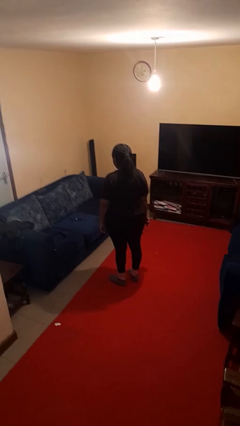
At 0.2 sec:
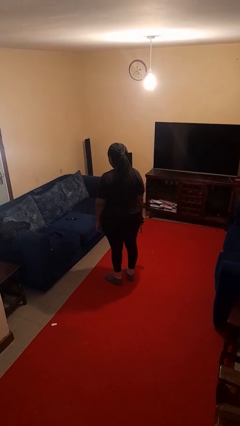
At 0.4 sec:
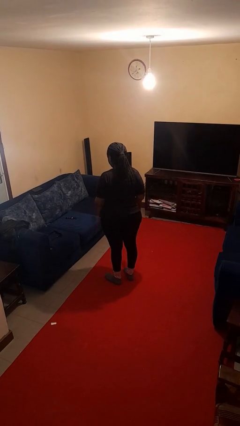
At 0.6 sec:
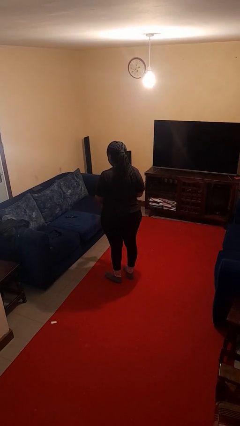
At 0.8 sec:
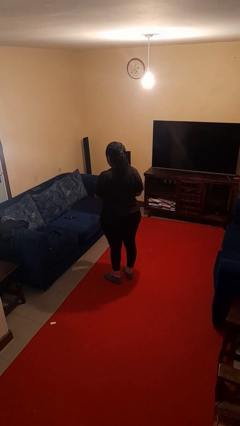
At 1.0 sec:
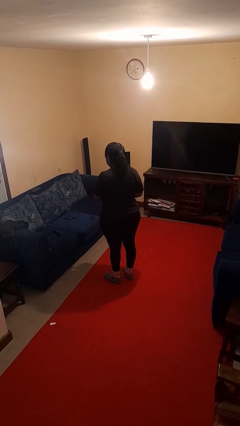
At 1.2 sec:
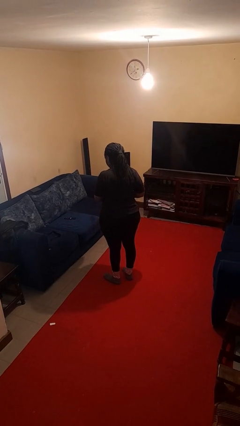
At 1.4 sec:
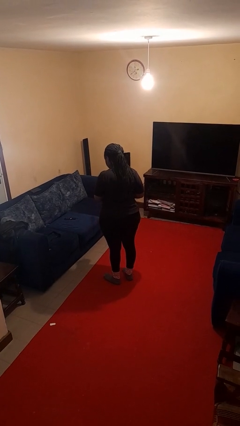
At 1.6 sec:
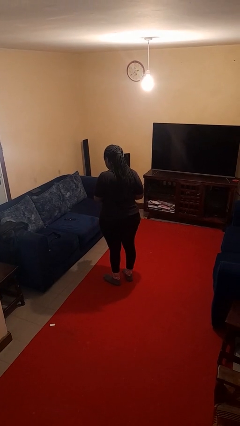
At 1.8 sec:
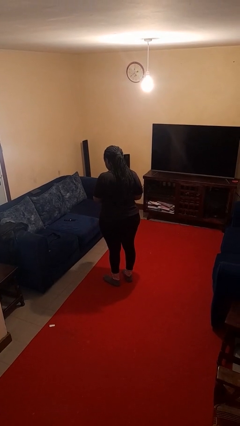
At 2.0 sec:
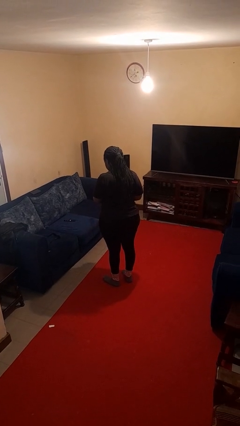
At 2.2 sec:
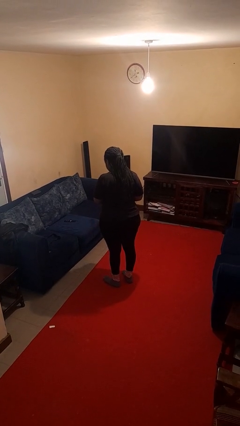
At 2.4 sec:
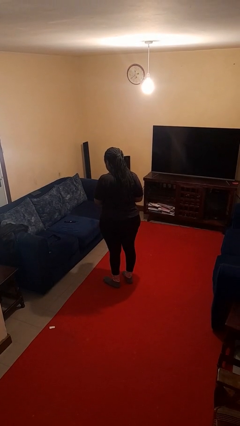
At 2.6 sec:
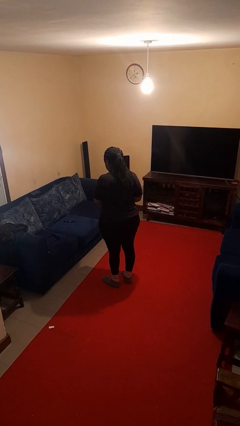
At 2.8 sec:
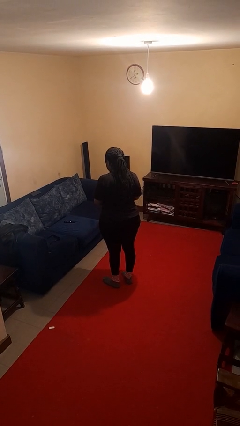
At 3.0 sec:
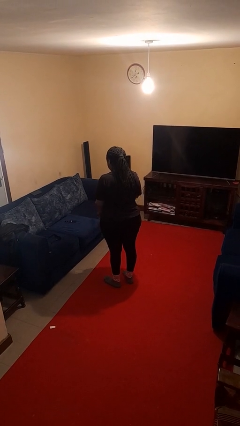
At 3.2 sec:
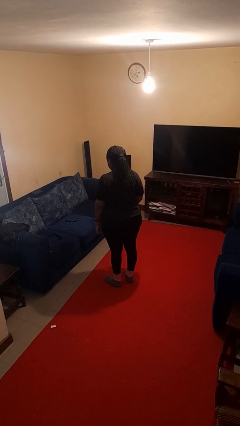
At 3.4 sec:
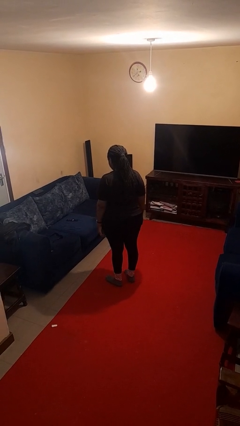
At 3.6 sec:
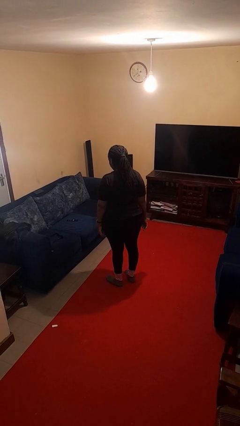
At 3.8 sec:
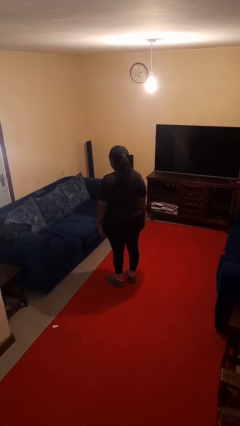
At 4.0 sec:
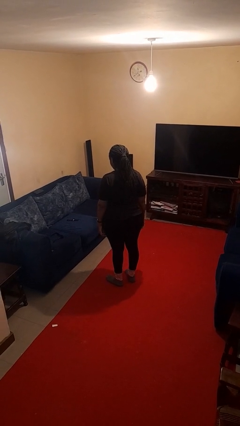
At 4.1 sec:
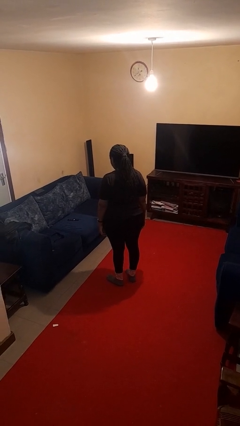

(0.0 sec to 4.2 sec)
person puts on wristwatch

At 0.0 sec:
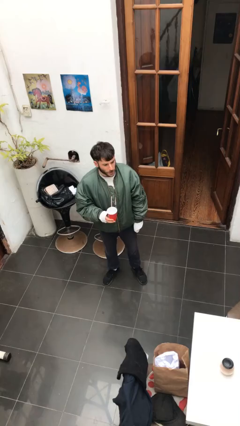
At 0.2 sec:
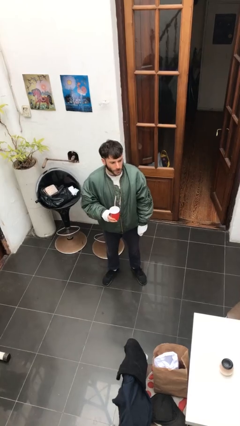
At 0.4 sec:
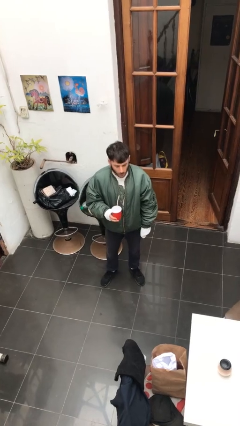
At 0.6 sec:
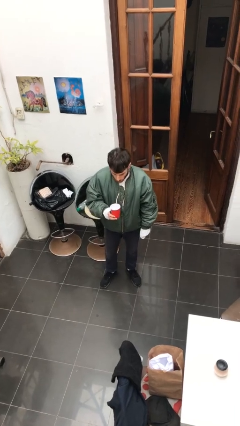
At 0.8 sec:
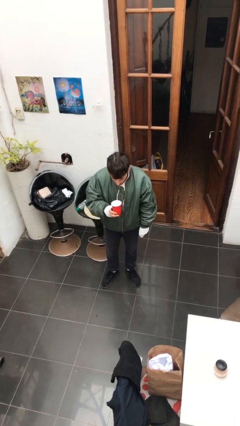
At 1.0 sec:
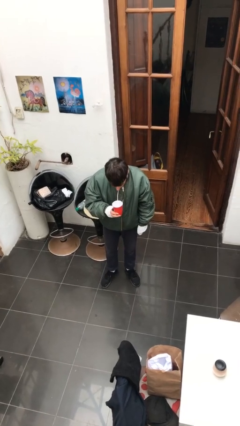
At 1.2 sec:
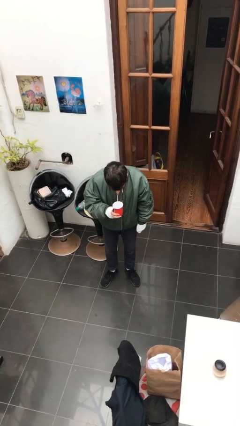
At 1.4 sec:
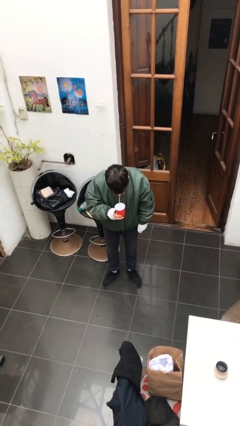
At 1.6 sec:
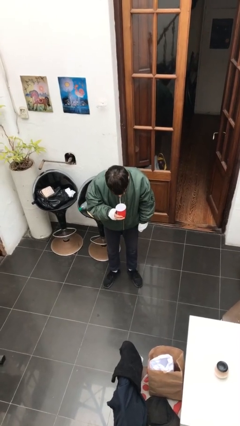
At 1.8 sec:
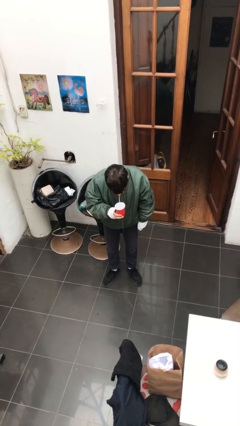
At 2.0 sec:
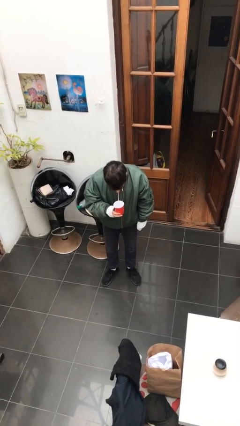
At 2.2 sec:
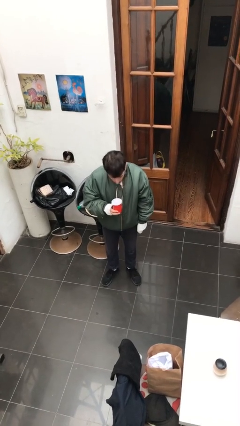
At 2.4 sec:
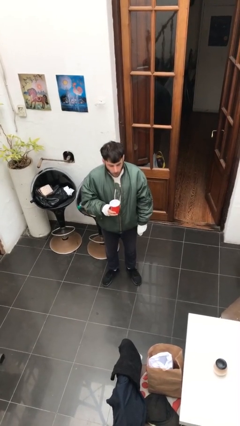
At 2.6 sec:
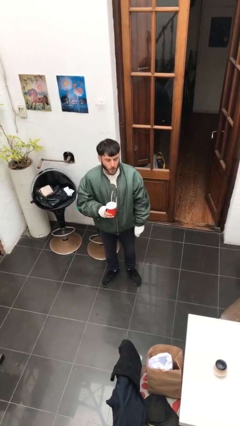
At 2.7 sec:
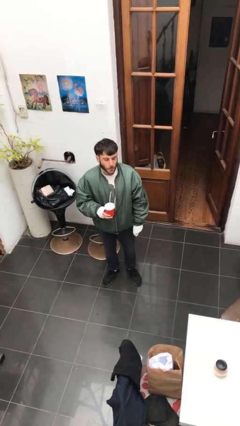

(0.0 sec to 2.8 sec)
person drinks from straw

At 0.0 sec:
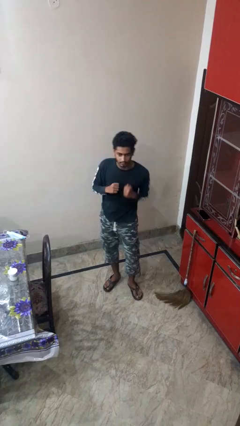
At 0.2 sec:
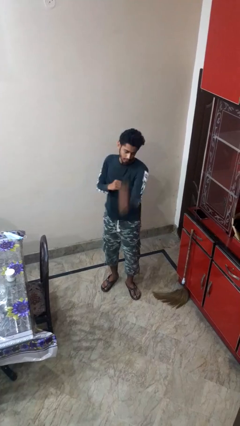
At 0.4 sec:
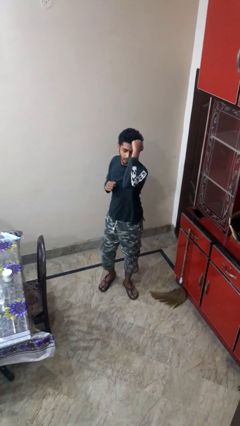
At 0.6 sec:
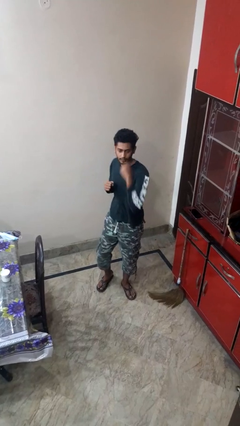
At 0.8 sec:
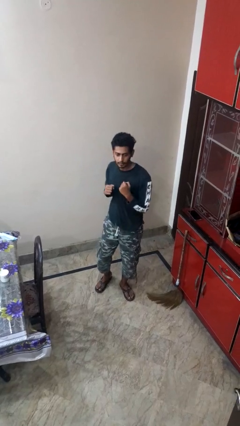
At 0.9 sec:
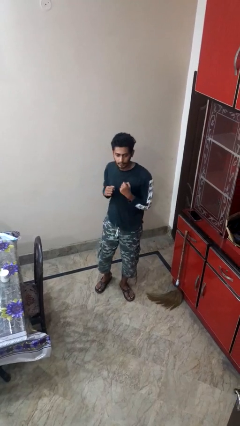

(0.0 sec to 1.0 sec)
person punches

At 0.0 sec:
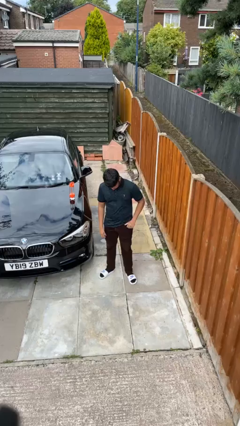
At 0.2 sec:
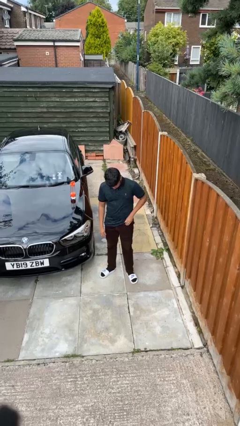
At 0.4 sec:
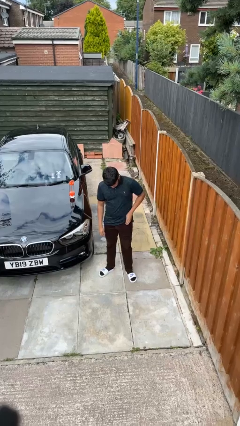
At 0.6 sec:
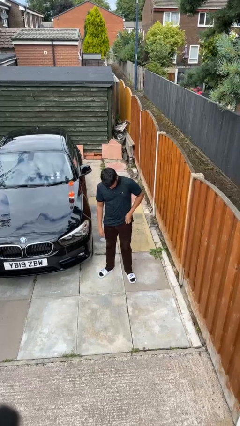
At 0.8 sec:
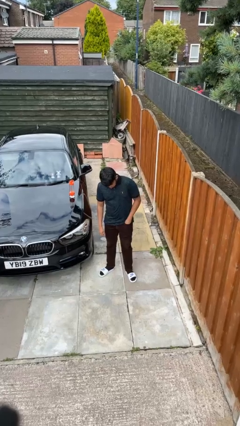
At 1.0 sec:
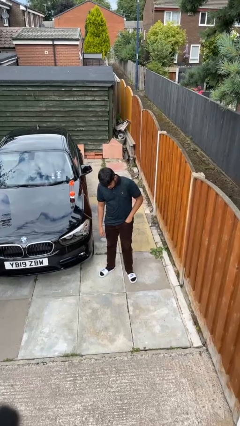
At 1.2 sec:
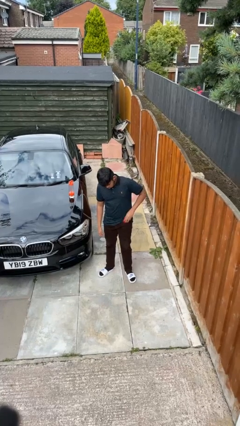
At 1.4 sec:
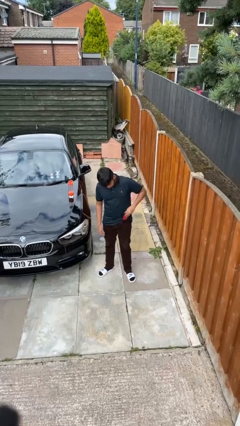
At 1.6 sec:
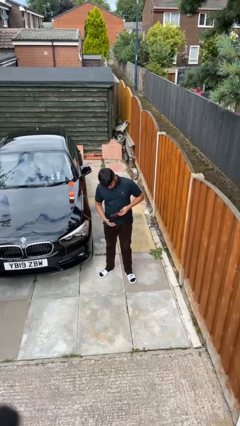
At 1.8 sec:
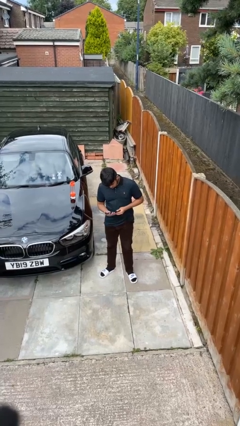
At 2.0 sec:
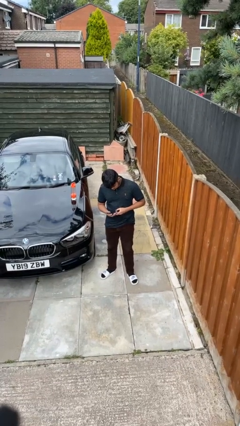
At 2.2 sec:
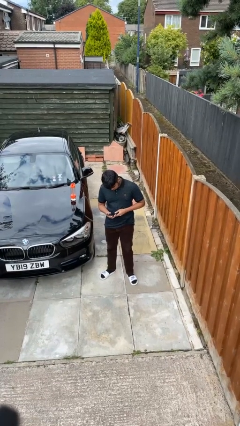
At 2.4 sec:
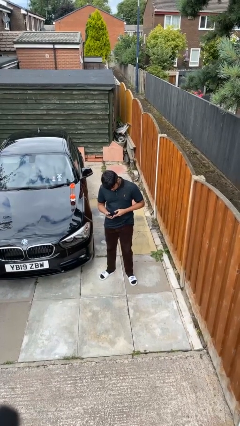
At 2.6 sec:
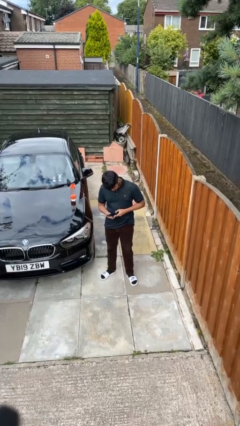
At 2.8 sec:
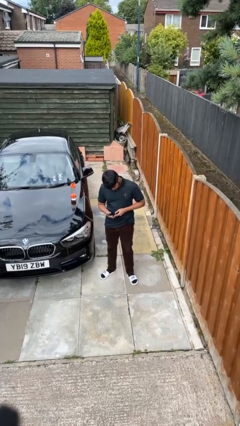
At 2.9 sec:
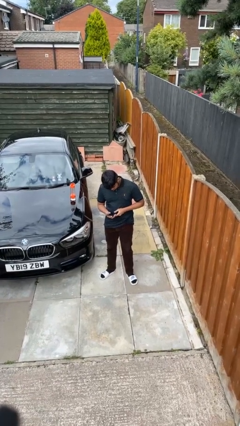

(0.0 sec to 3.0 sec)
person takes phone from pocket

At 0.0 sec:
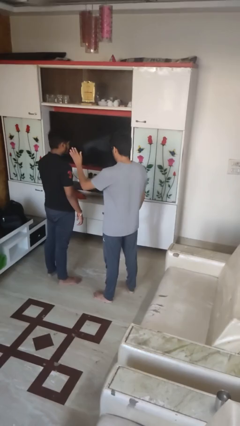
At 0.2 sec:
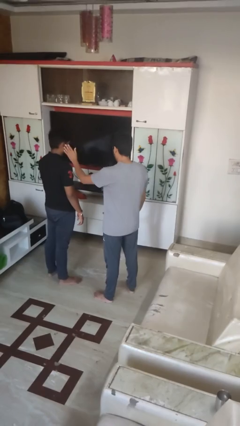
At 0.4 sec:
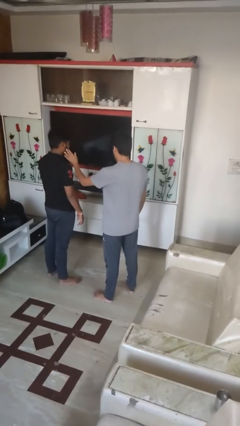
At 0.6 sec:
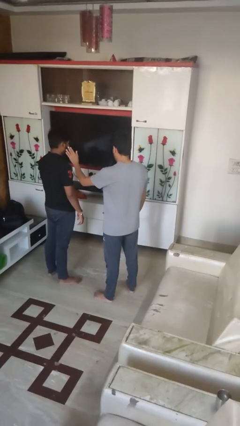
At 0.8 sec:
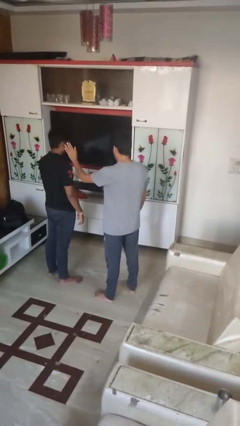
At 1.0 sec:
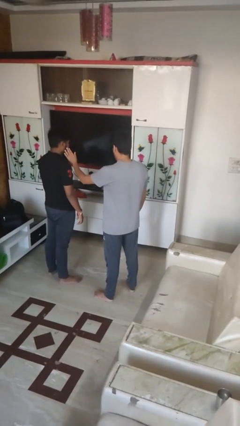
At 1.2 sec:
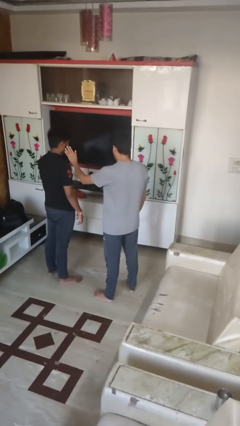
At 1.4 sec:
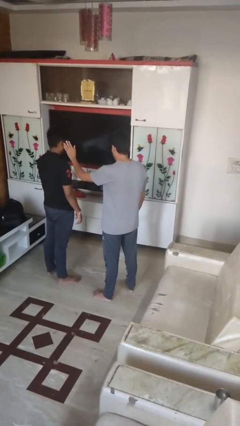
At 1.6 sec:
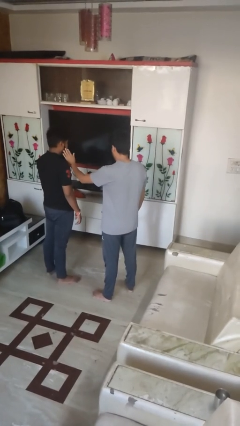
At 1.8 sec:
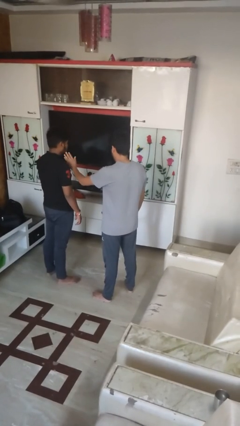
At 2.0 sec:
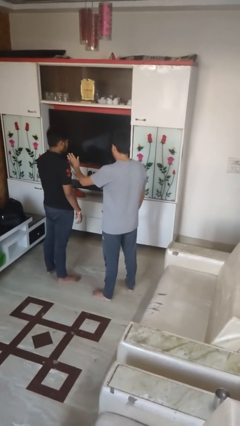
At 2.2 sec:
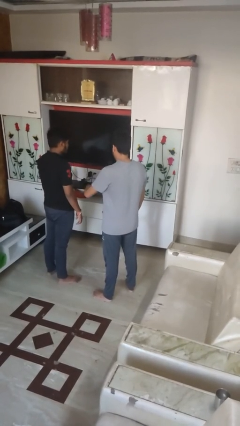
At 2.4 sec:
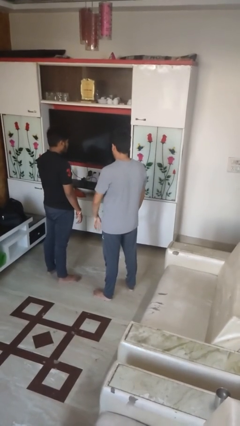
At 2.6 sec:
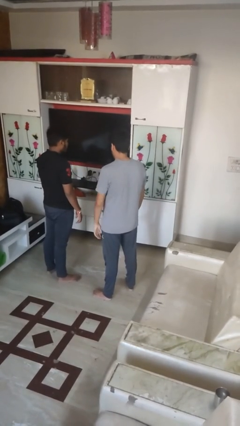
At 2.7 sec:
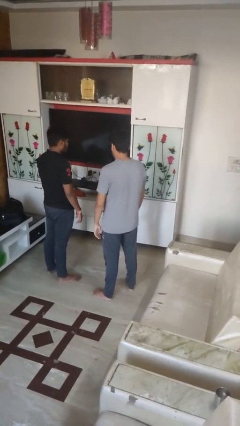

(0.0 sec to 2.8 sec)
person touches face of person

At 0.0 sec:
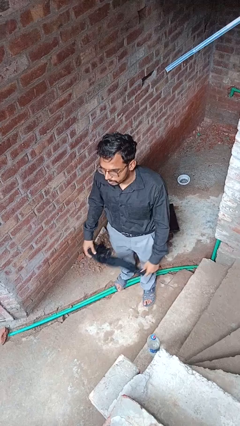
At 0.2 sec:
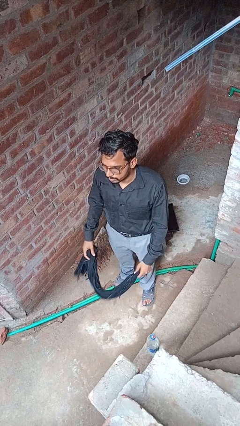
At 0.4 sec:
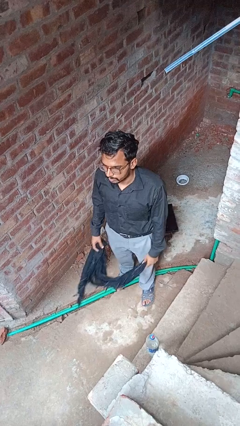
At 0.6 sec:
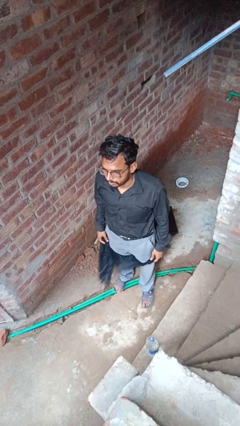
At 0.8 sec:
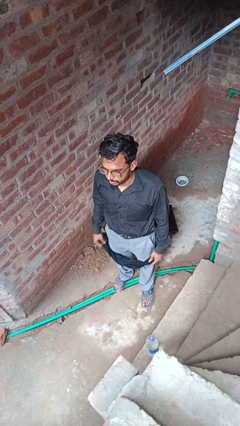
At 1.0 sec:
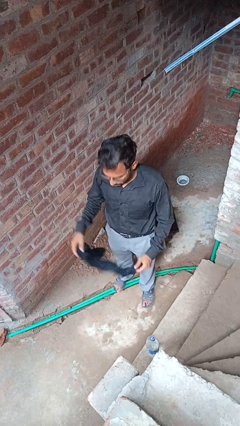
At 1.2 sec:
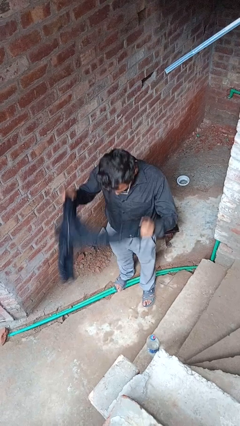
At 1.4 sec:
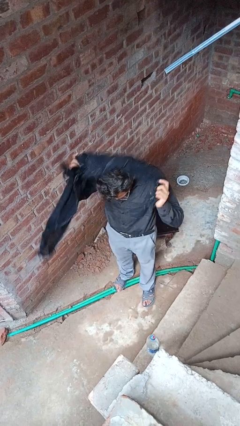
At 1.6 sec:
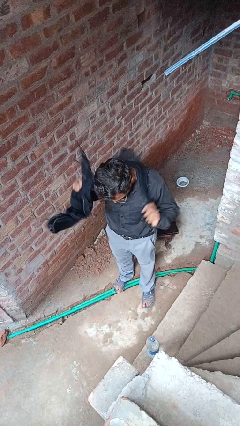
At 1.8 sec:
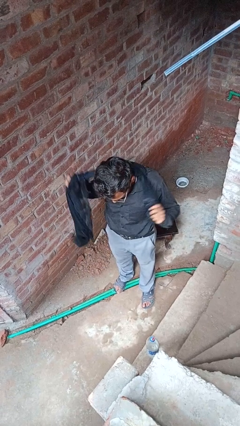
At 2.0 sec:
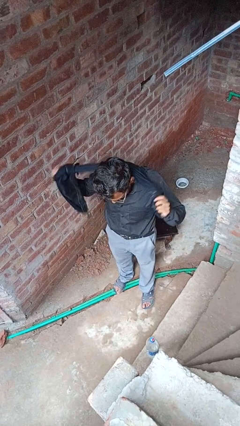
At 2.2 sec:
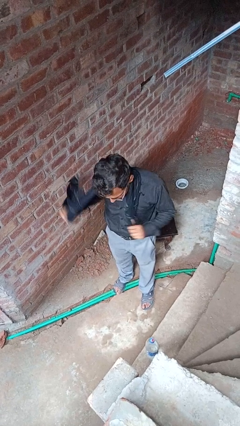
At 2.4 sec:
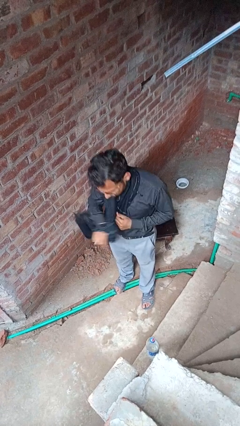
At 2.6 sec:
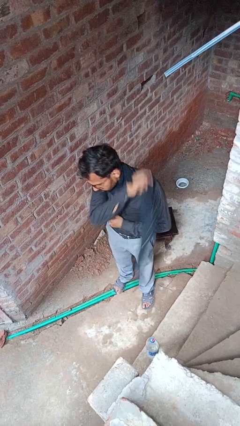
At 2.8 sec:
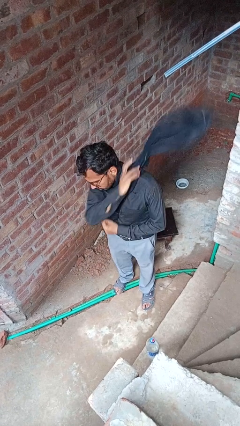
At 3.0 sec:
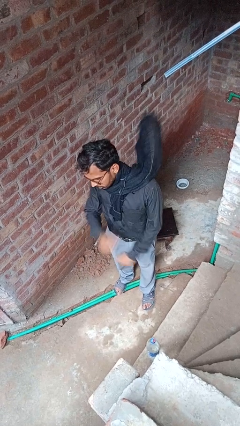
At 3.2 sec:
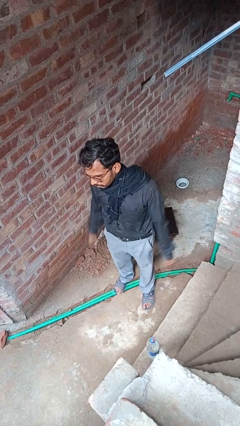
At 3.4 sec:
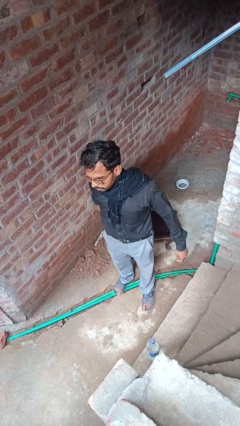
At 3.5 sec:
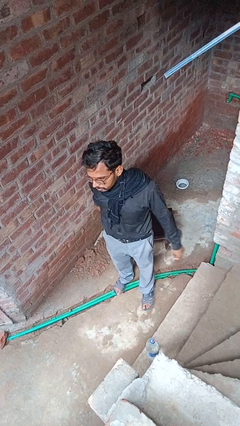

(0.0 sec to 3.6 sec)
person puts on scarf
